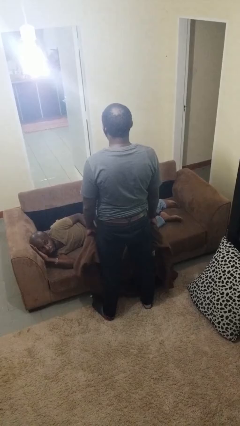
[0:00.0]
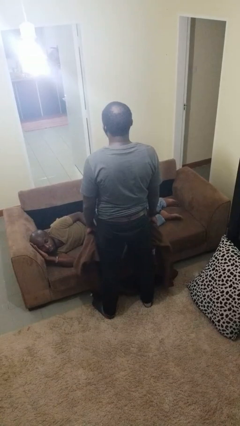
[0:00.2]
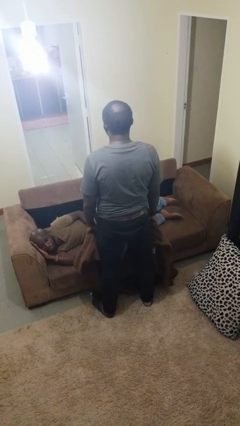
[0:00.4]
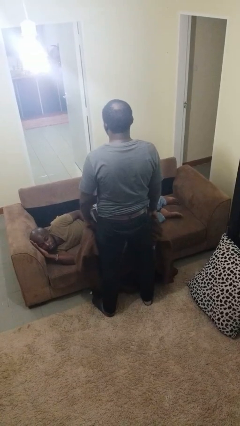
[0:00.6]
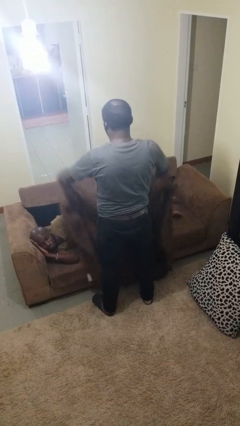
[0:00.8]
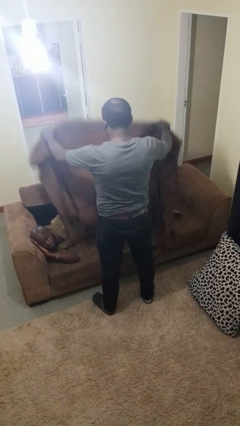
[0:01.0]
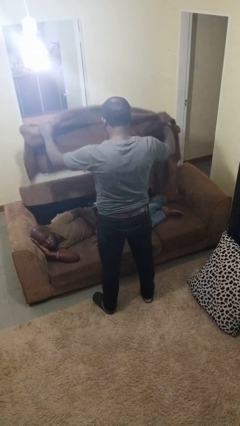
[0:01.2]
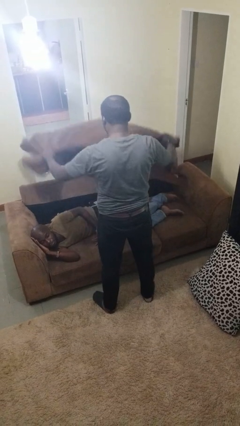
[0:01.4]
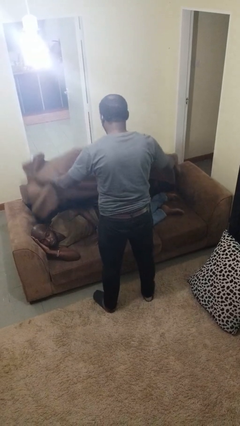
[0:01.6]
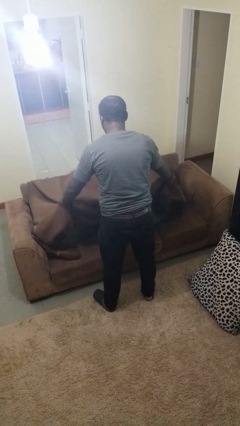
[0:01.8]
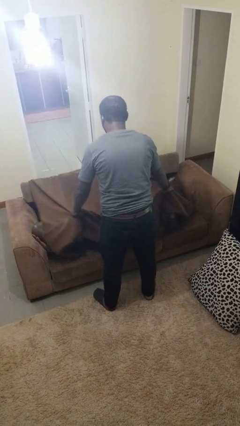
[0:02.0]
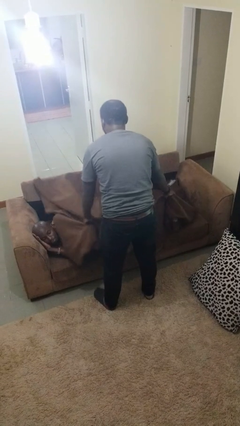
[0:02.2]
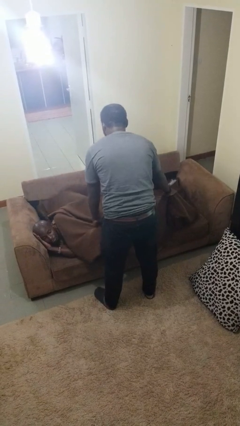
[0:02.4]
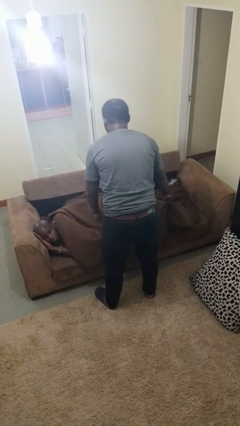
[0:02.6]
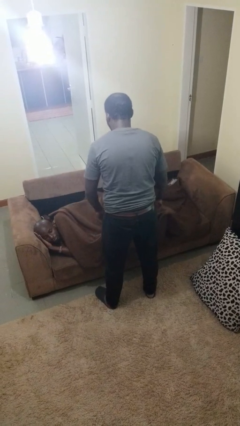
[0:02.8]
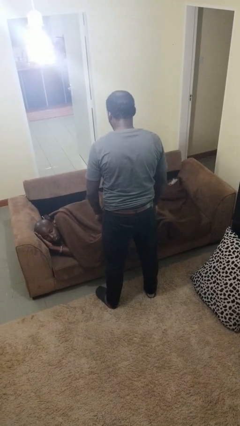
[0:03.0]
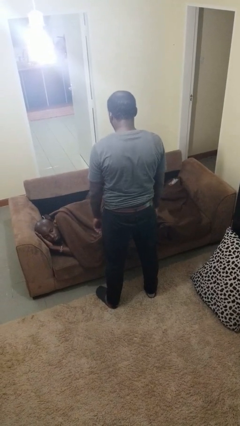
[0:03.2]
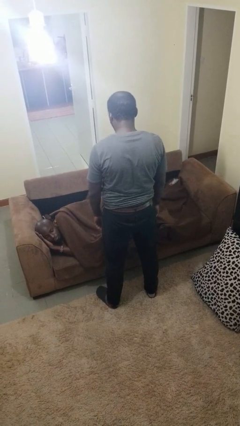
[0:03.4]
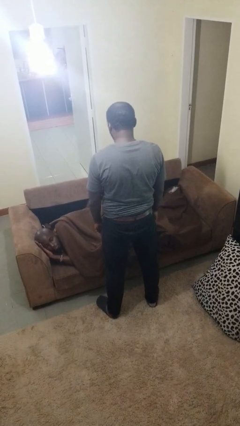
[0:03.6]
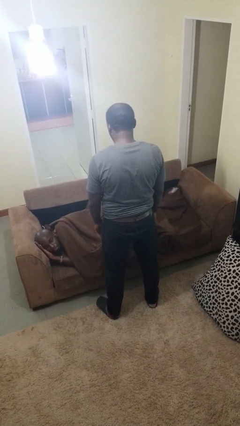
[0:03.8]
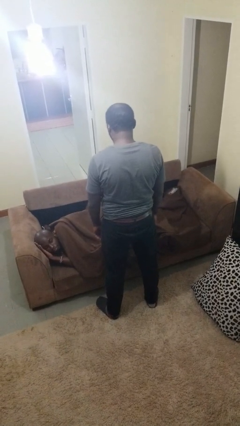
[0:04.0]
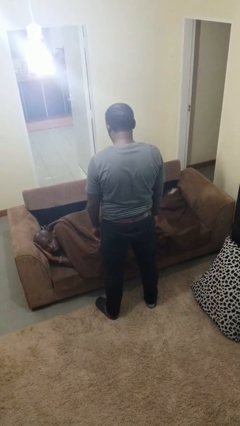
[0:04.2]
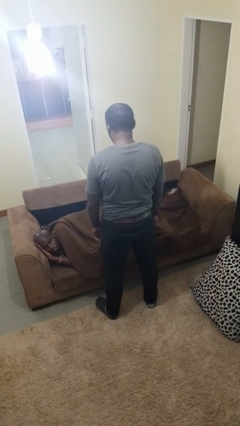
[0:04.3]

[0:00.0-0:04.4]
person covers friend with blanket

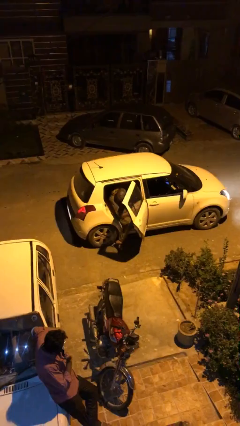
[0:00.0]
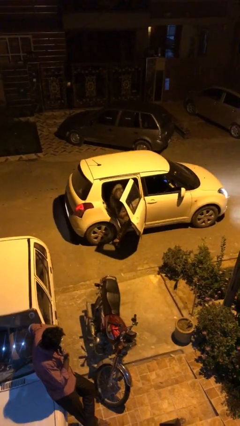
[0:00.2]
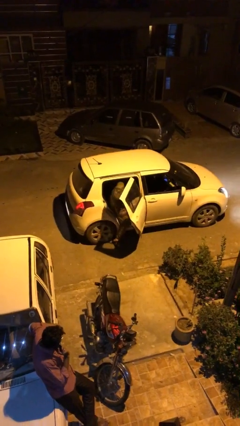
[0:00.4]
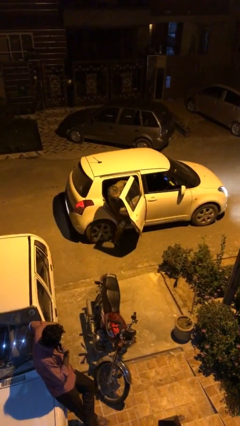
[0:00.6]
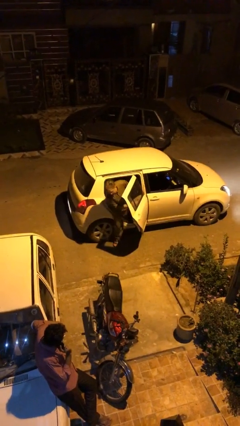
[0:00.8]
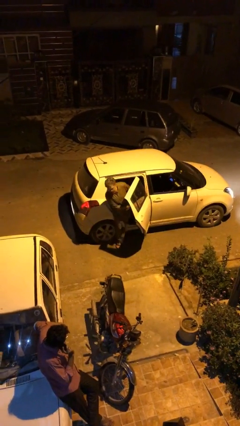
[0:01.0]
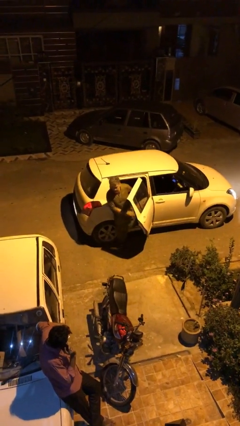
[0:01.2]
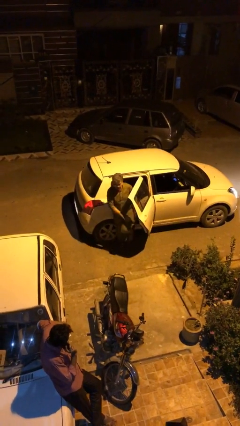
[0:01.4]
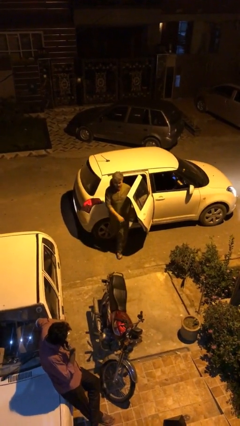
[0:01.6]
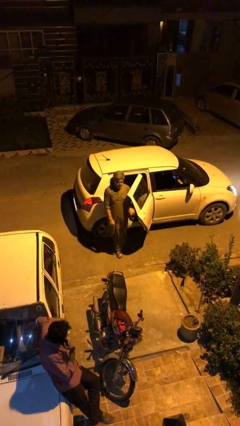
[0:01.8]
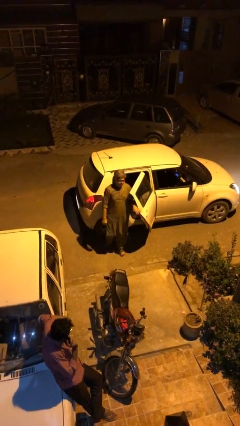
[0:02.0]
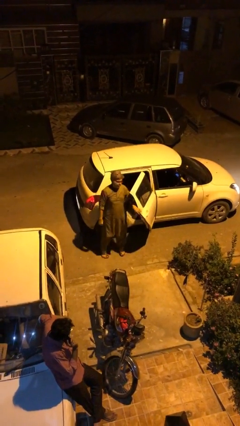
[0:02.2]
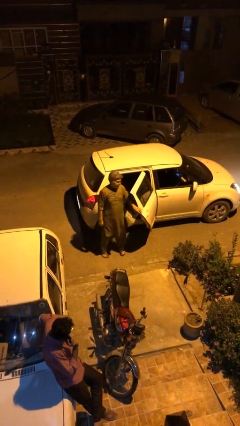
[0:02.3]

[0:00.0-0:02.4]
person exits car

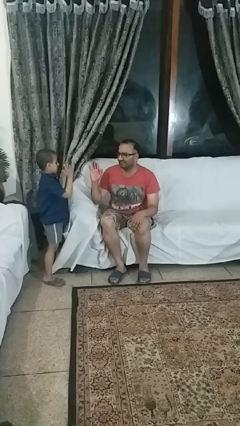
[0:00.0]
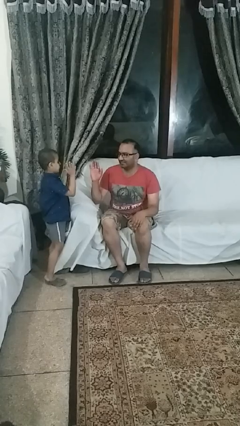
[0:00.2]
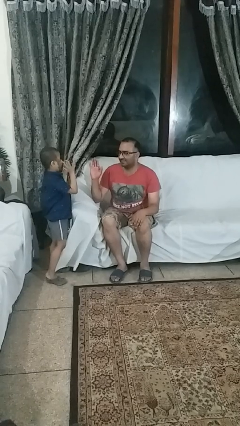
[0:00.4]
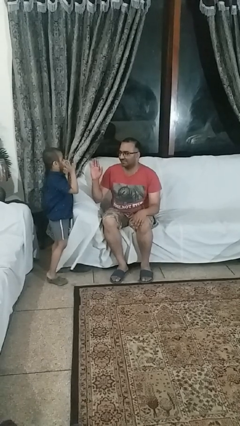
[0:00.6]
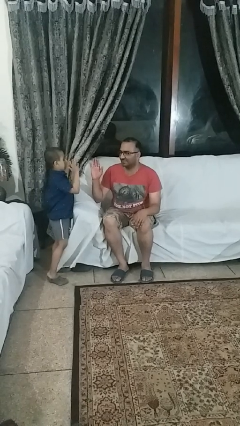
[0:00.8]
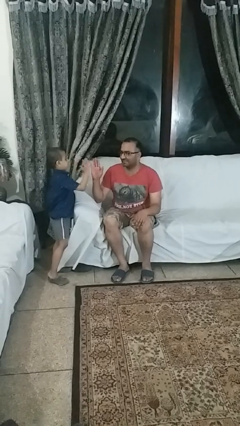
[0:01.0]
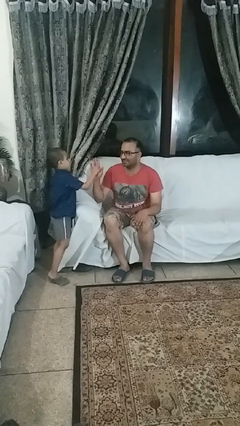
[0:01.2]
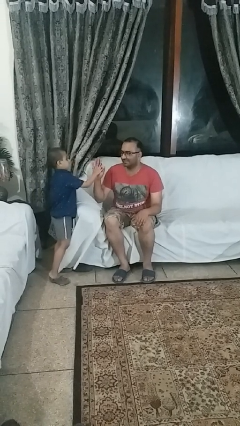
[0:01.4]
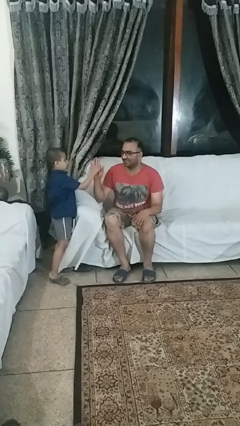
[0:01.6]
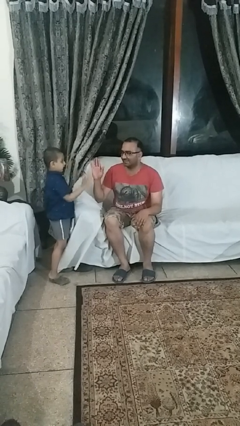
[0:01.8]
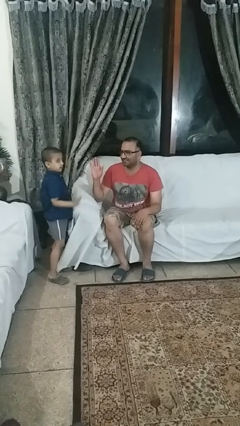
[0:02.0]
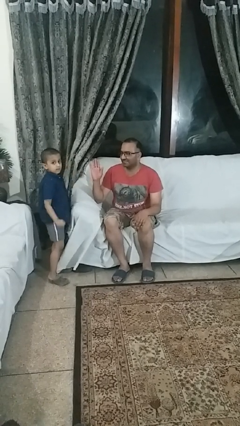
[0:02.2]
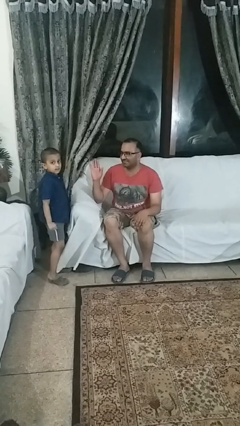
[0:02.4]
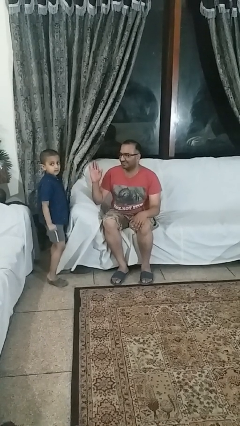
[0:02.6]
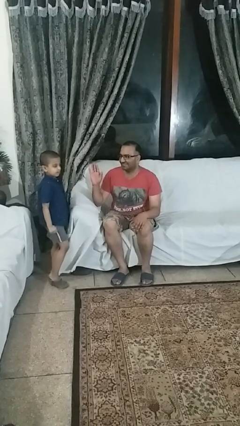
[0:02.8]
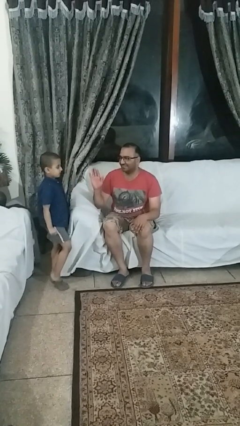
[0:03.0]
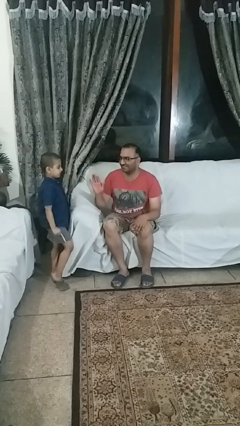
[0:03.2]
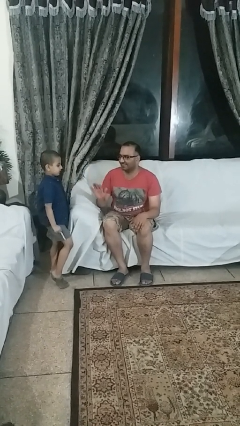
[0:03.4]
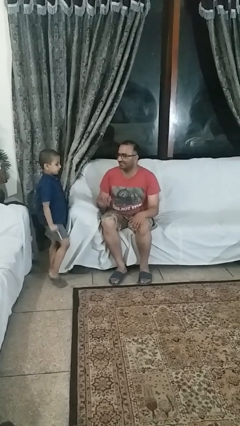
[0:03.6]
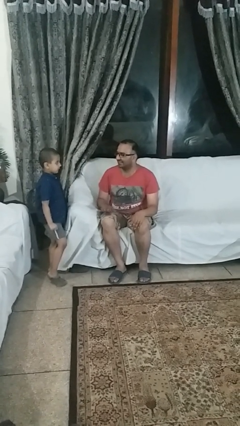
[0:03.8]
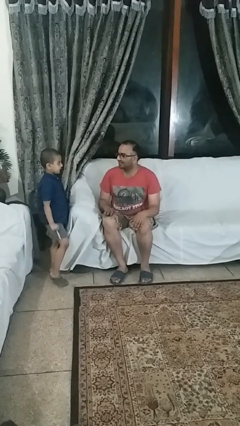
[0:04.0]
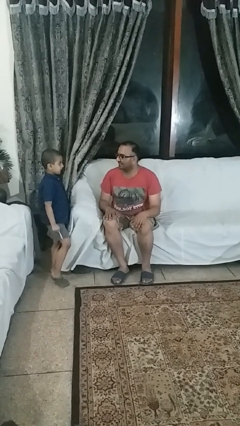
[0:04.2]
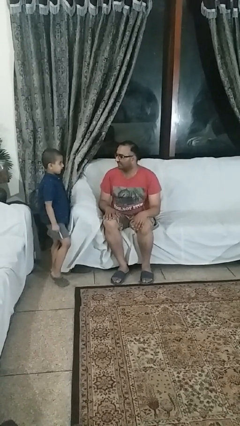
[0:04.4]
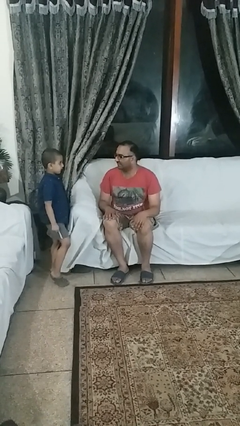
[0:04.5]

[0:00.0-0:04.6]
person highfives hand

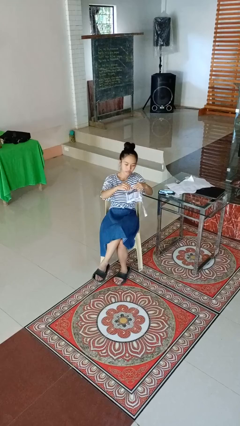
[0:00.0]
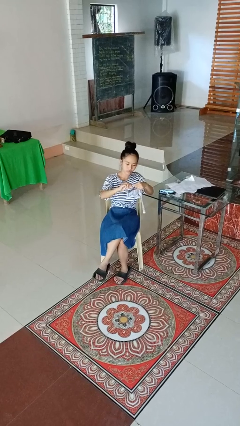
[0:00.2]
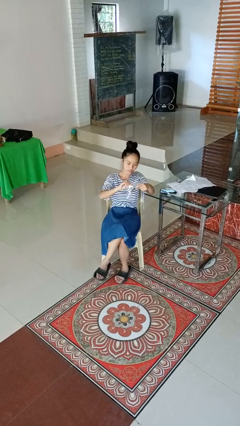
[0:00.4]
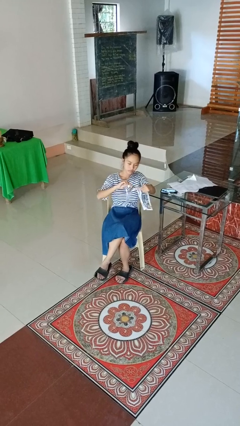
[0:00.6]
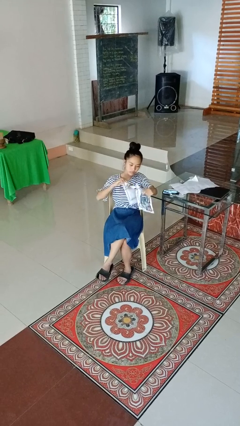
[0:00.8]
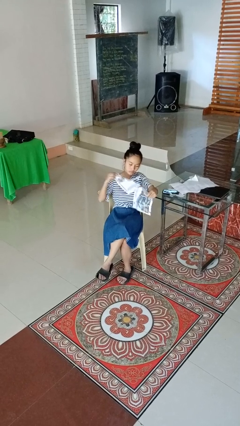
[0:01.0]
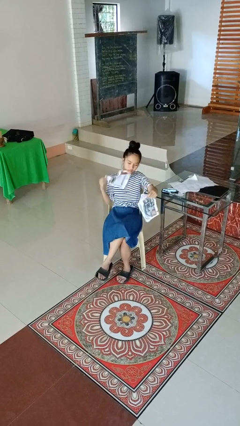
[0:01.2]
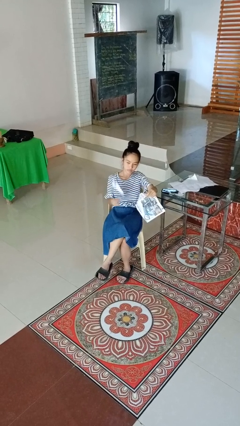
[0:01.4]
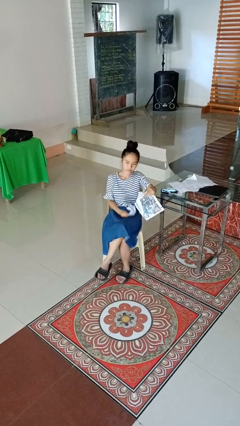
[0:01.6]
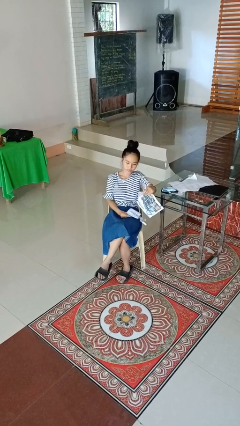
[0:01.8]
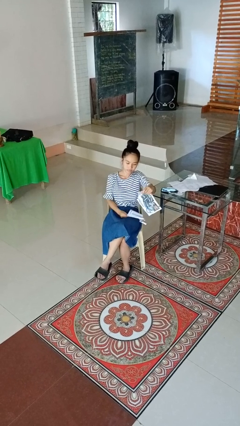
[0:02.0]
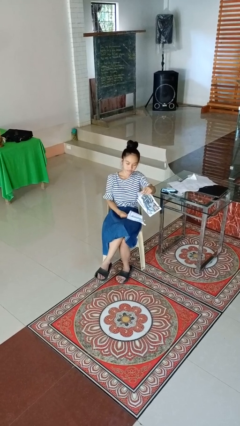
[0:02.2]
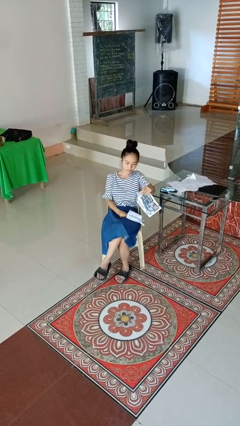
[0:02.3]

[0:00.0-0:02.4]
person tears paper

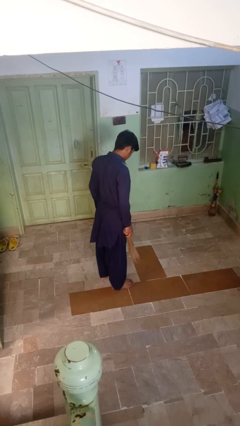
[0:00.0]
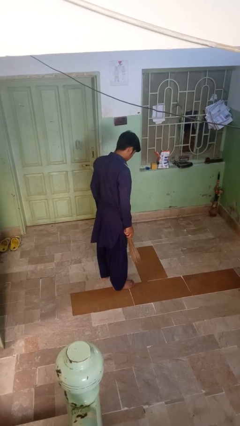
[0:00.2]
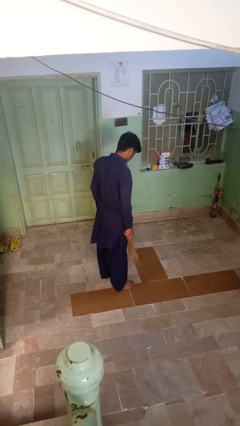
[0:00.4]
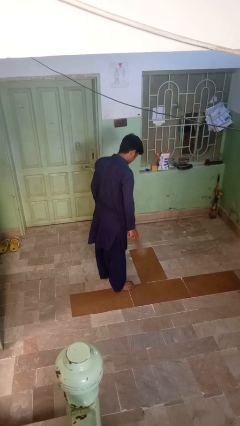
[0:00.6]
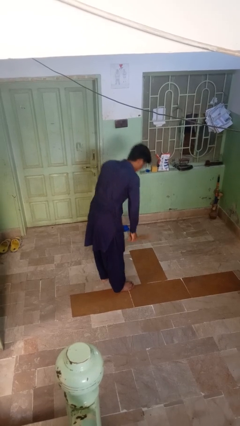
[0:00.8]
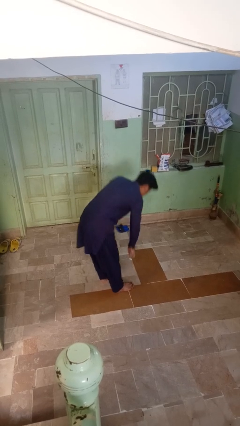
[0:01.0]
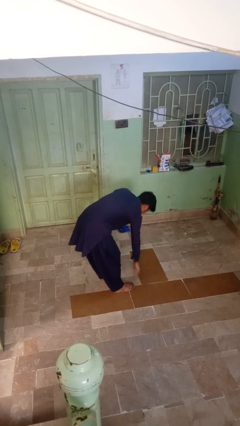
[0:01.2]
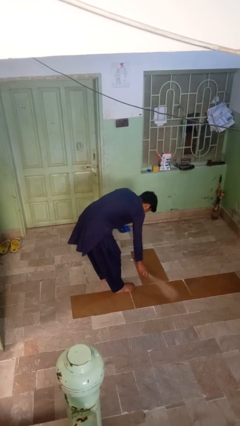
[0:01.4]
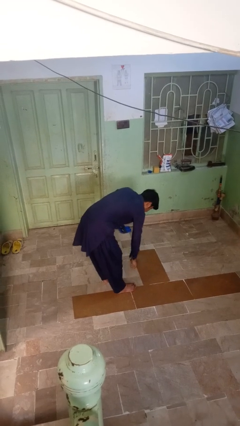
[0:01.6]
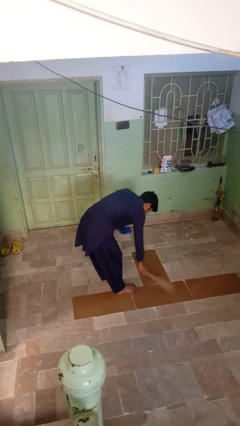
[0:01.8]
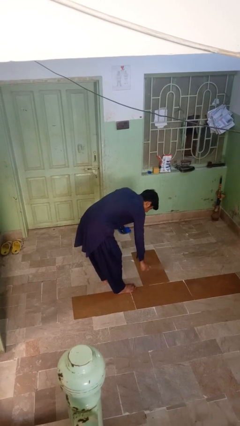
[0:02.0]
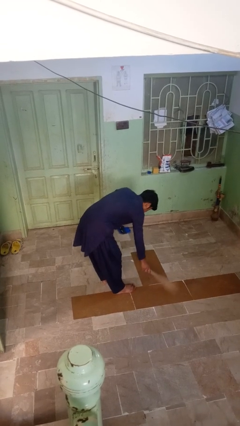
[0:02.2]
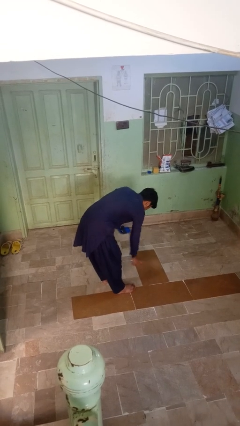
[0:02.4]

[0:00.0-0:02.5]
person sweeps floor

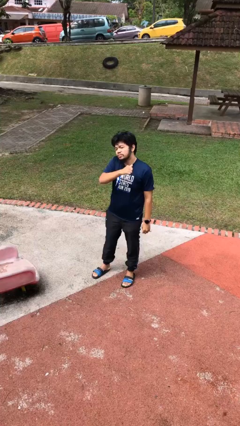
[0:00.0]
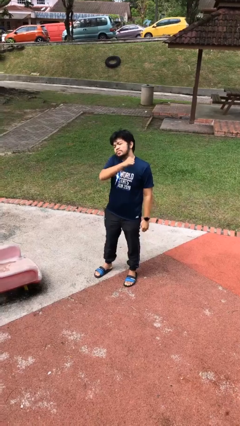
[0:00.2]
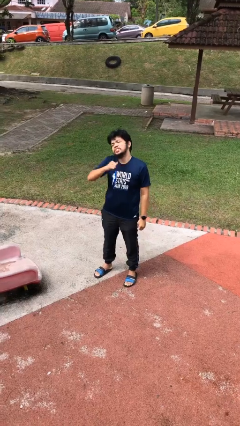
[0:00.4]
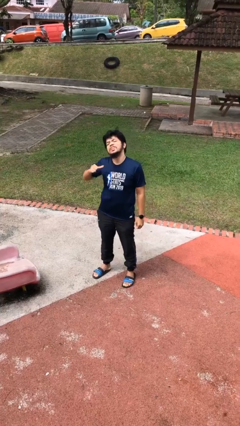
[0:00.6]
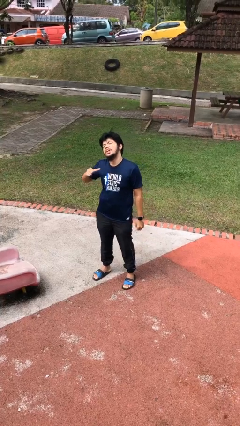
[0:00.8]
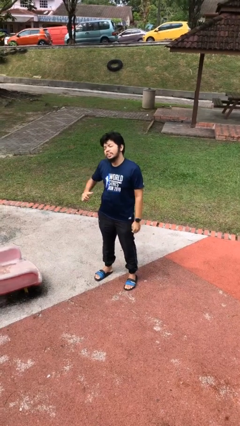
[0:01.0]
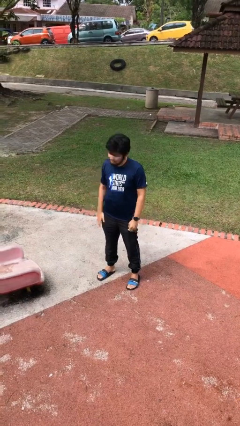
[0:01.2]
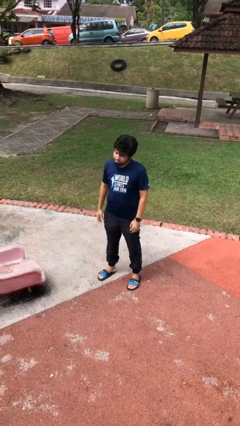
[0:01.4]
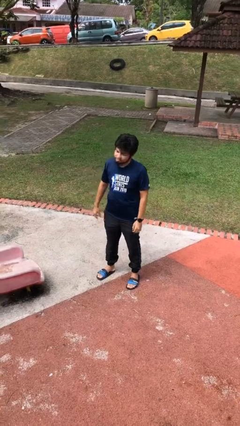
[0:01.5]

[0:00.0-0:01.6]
person gestures cut
